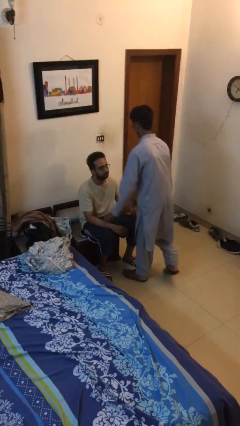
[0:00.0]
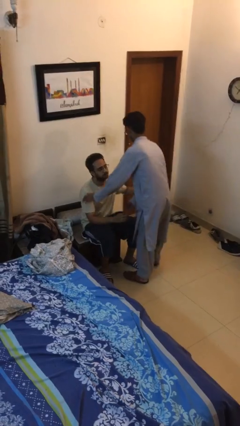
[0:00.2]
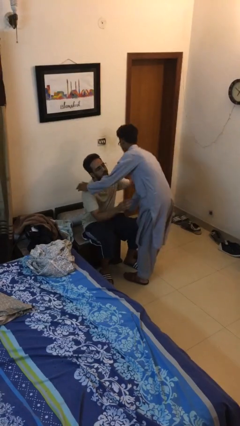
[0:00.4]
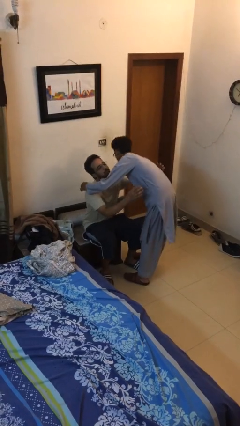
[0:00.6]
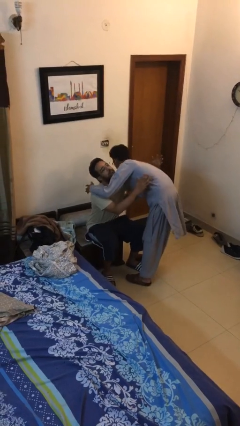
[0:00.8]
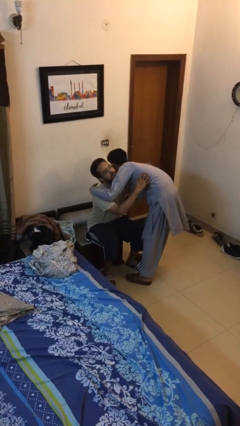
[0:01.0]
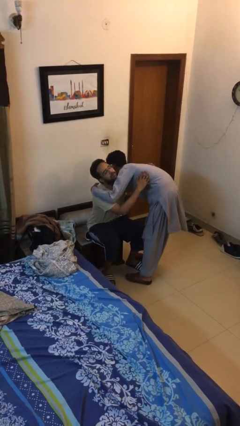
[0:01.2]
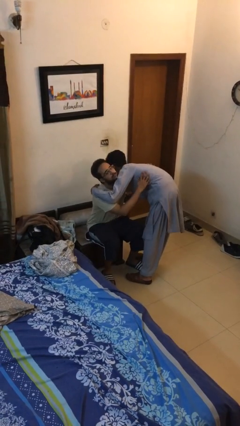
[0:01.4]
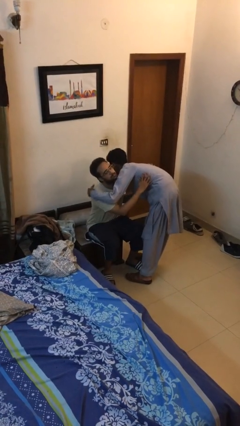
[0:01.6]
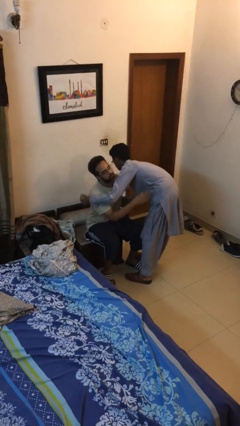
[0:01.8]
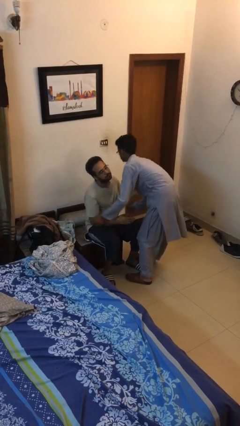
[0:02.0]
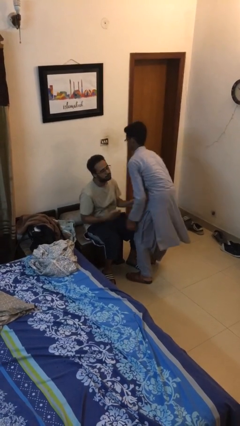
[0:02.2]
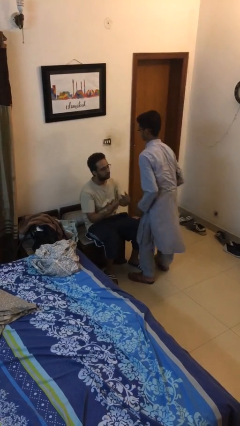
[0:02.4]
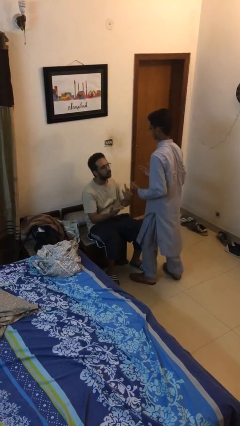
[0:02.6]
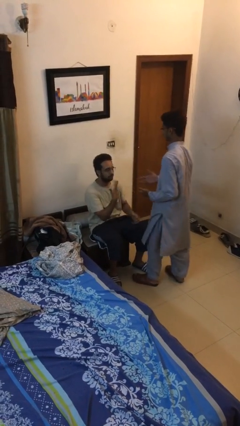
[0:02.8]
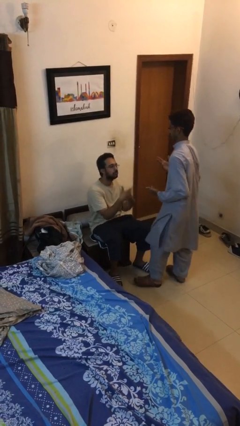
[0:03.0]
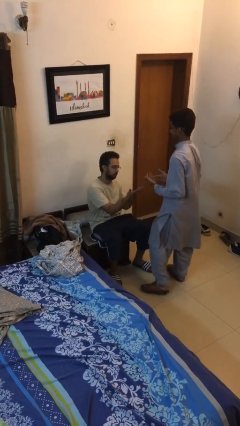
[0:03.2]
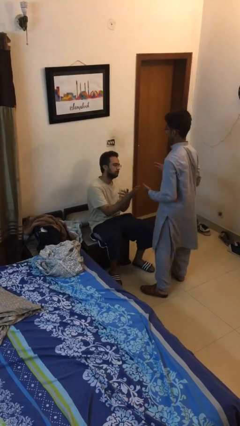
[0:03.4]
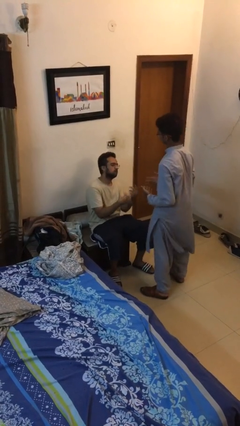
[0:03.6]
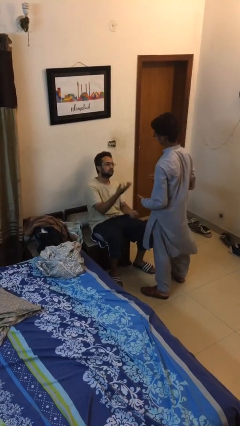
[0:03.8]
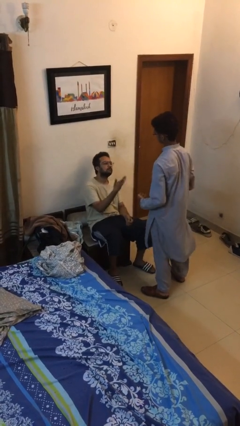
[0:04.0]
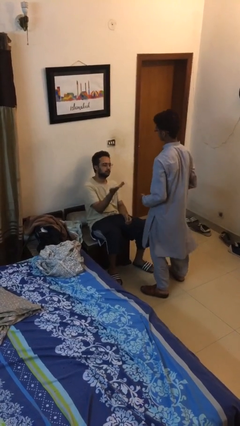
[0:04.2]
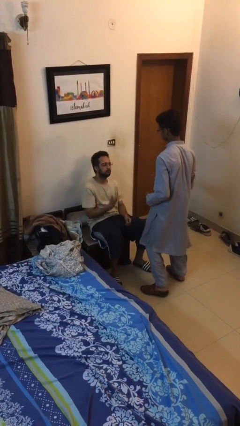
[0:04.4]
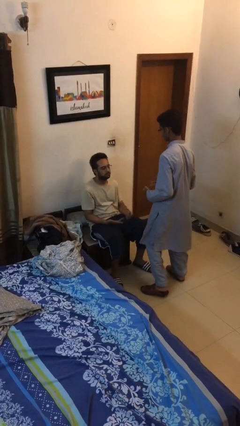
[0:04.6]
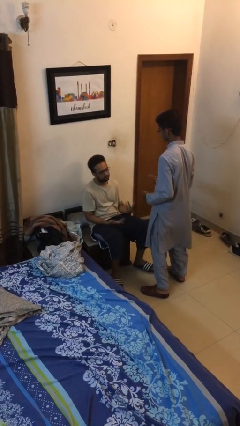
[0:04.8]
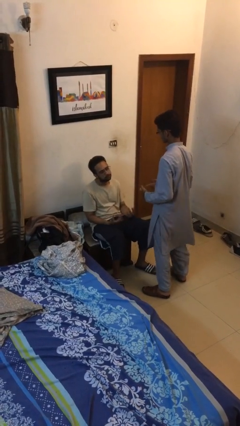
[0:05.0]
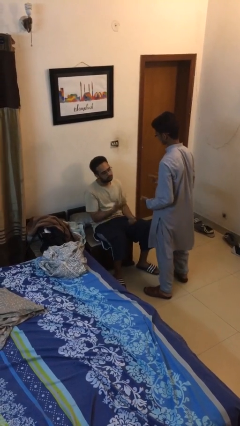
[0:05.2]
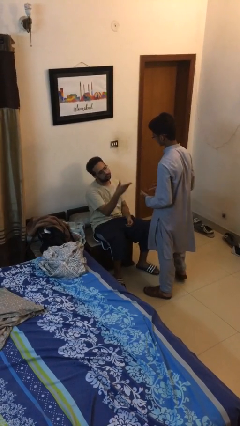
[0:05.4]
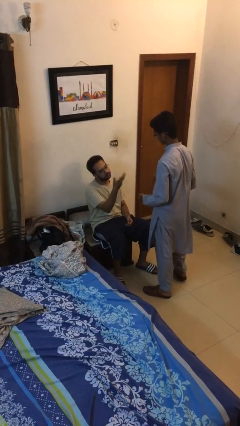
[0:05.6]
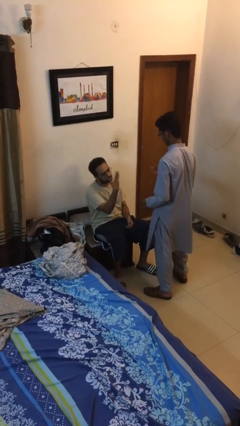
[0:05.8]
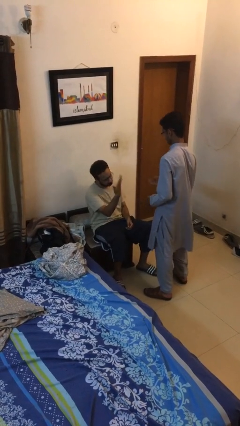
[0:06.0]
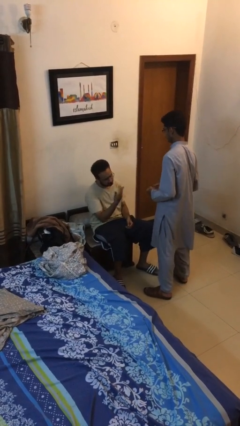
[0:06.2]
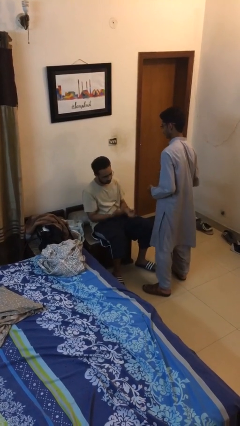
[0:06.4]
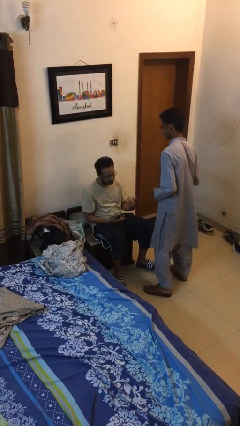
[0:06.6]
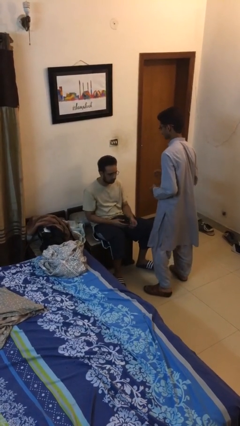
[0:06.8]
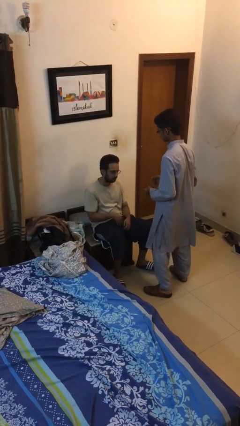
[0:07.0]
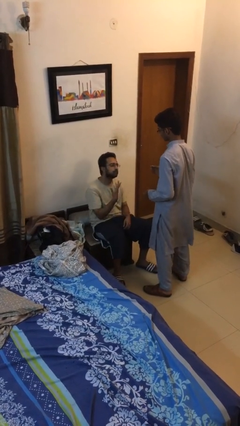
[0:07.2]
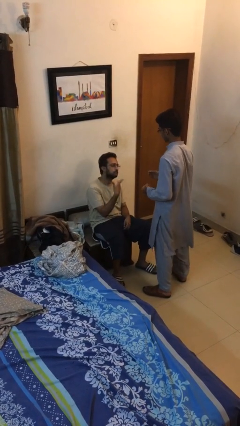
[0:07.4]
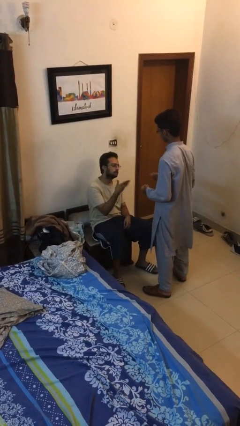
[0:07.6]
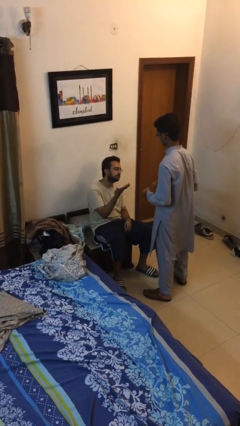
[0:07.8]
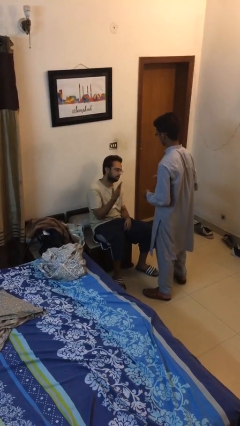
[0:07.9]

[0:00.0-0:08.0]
person embraces person

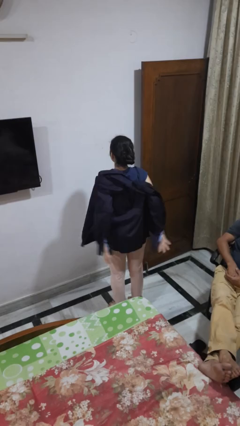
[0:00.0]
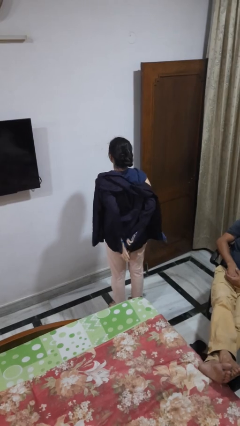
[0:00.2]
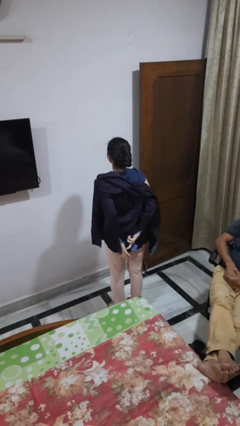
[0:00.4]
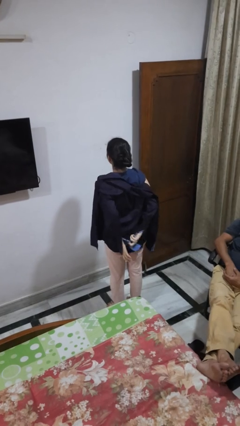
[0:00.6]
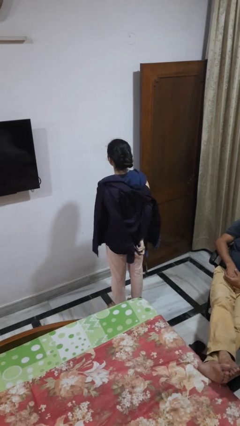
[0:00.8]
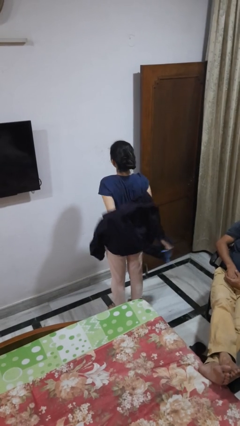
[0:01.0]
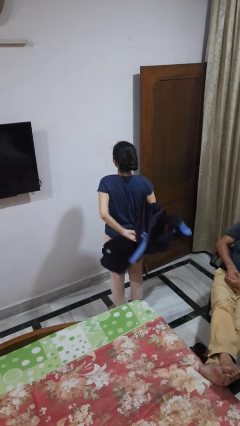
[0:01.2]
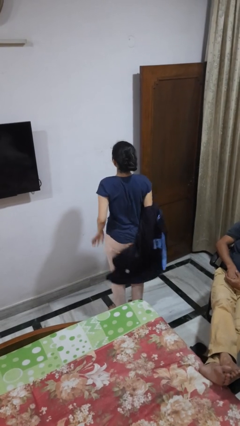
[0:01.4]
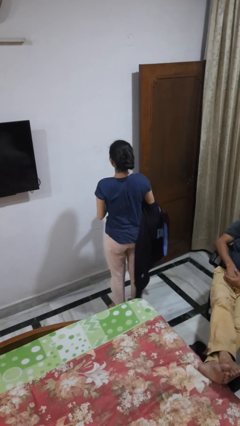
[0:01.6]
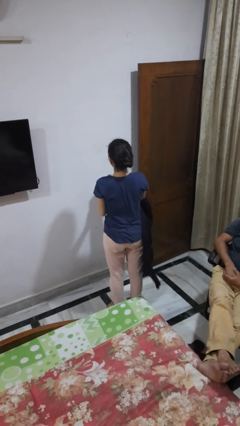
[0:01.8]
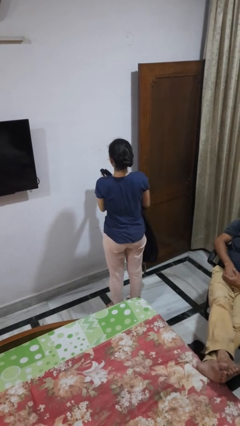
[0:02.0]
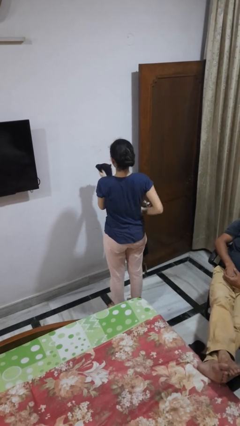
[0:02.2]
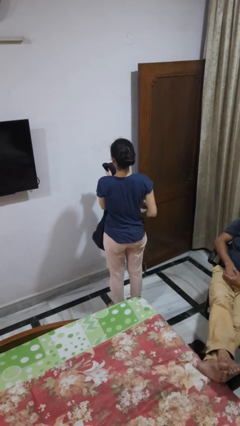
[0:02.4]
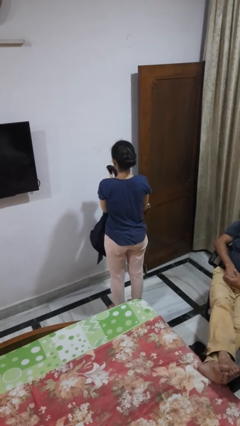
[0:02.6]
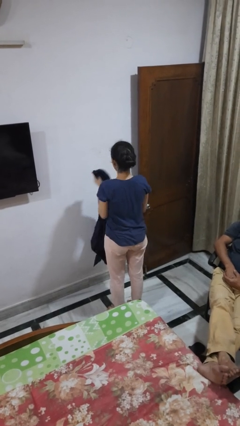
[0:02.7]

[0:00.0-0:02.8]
person takes off shirt

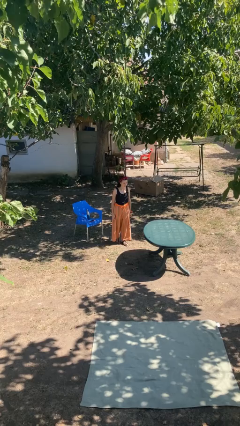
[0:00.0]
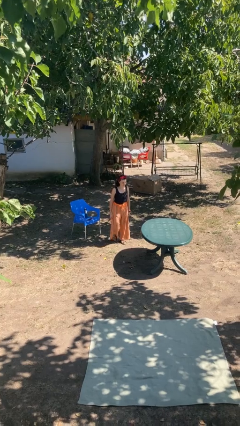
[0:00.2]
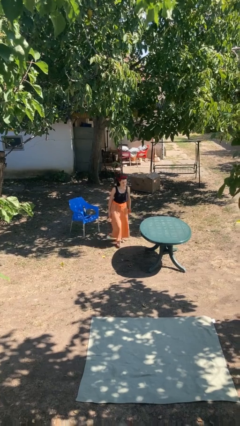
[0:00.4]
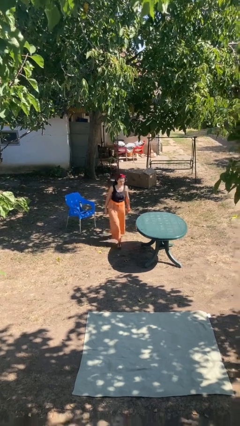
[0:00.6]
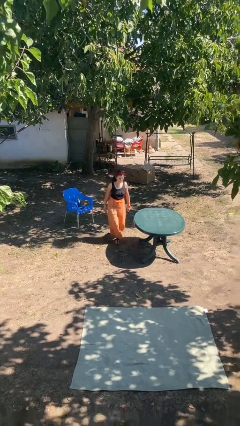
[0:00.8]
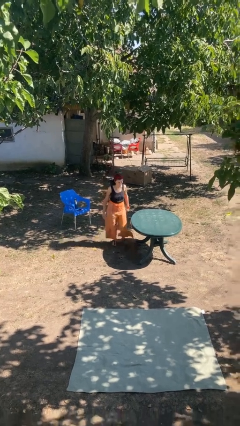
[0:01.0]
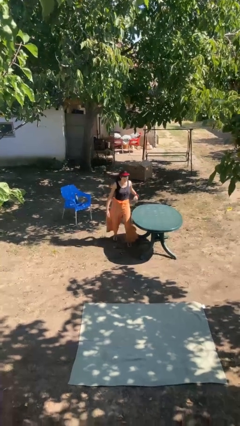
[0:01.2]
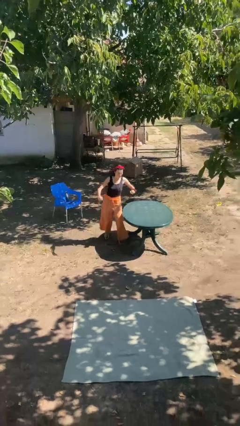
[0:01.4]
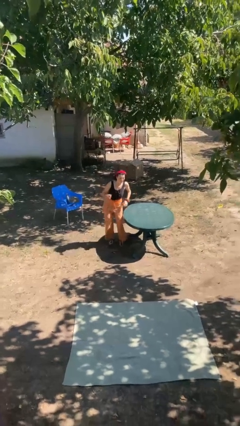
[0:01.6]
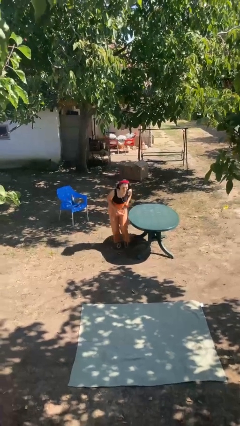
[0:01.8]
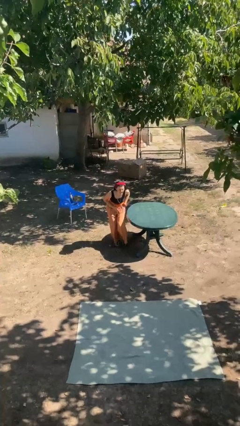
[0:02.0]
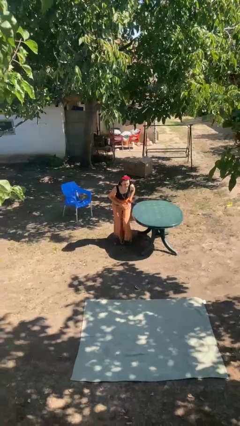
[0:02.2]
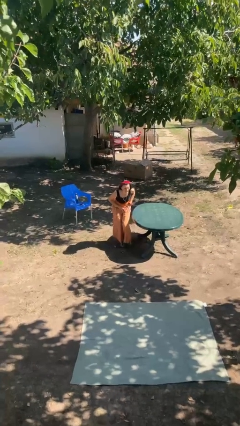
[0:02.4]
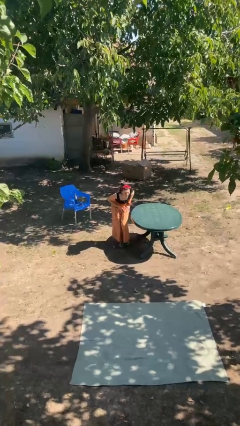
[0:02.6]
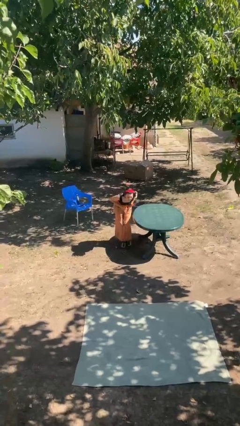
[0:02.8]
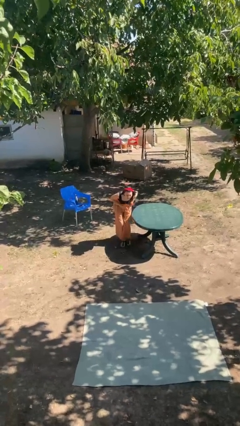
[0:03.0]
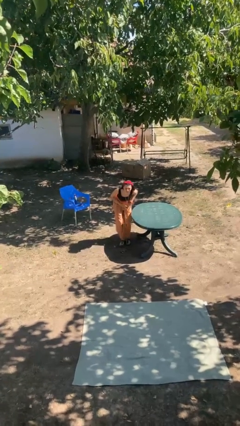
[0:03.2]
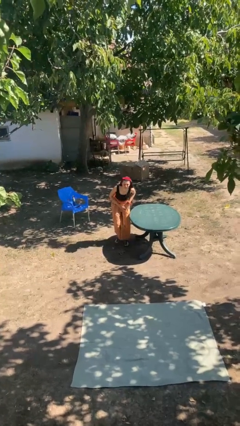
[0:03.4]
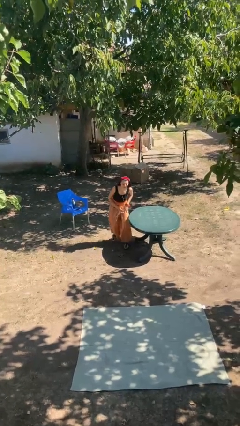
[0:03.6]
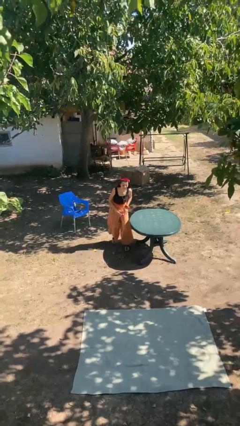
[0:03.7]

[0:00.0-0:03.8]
person bumps into table

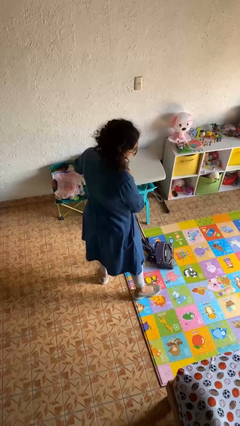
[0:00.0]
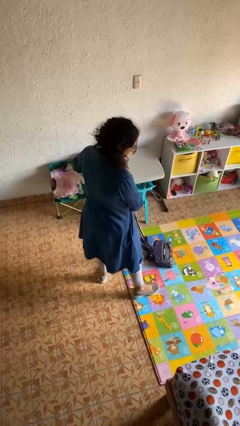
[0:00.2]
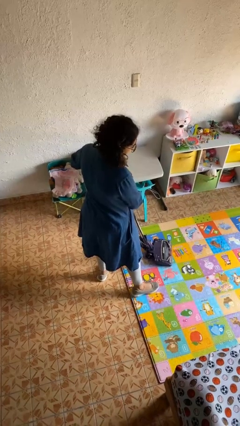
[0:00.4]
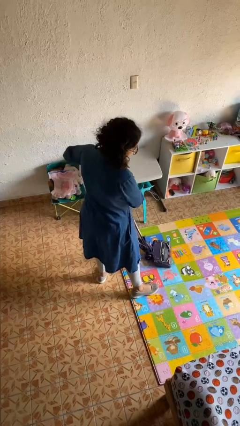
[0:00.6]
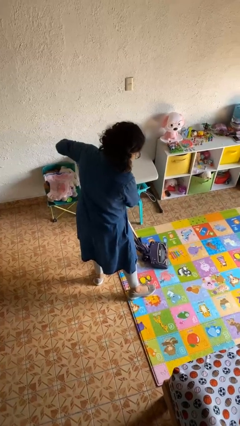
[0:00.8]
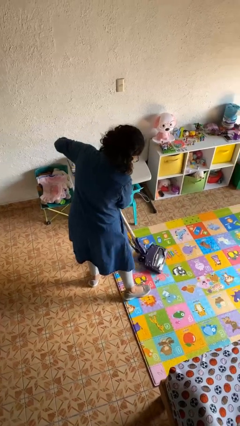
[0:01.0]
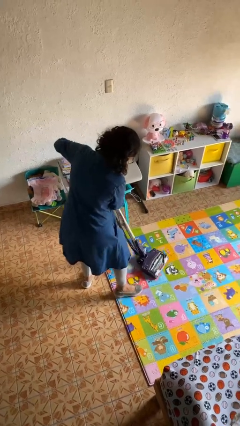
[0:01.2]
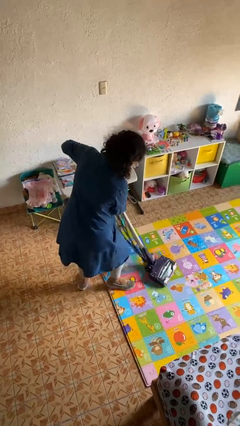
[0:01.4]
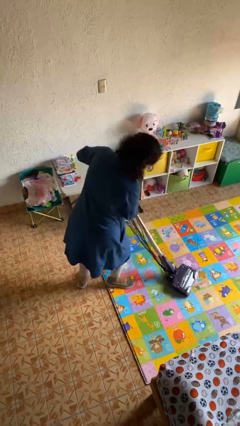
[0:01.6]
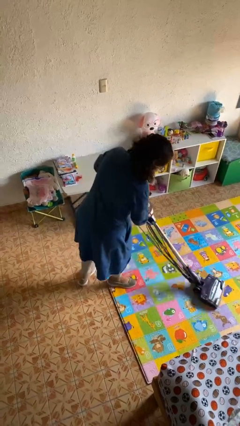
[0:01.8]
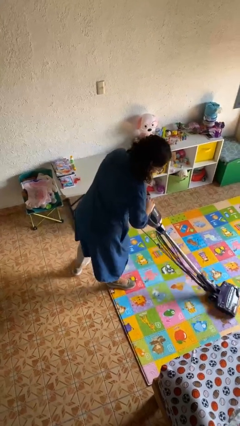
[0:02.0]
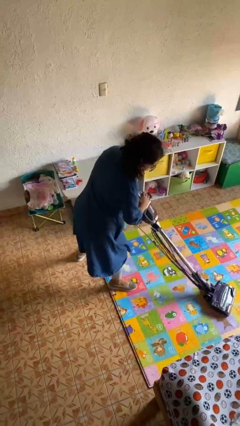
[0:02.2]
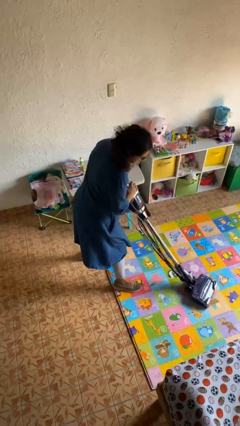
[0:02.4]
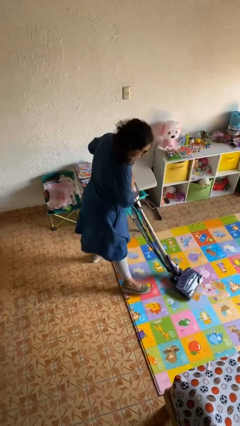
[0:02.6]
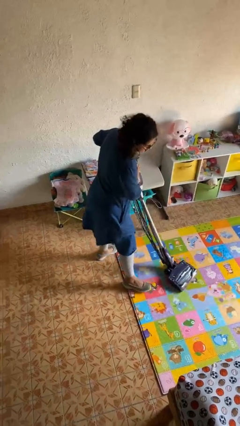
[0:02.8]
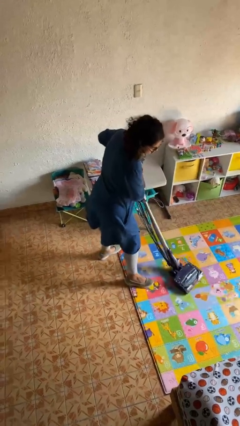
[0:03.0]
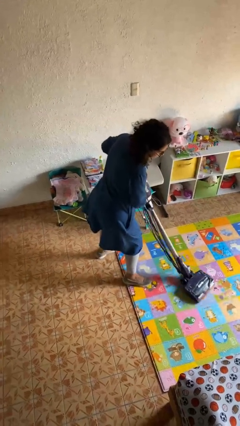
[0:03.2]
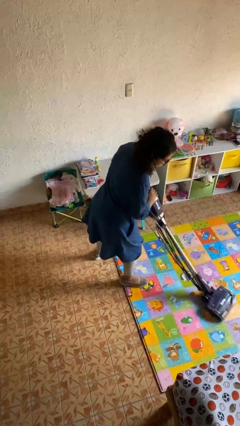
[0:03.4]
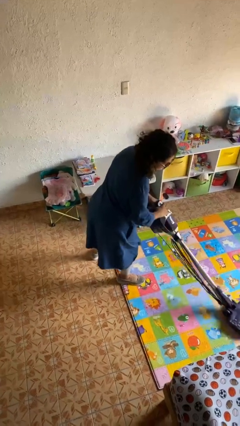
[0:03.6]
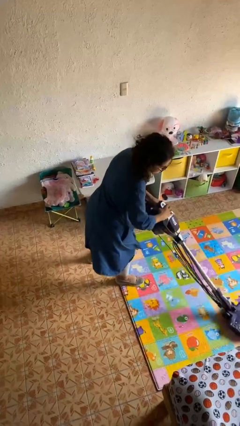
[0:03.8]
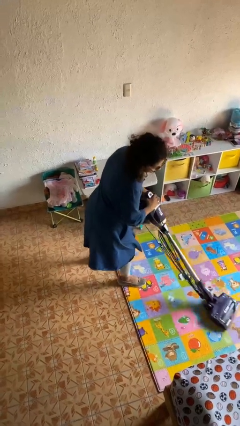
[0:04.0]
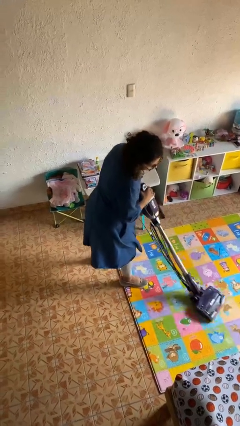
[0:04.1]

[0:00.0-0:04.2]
person vacuums carpet
